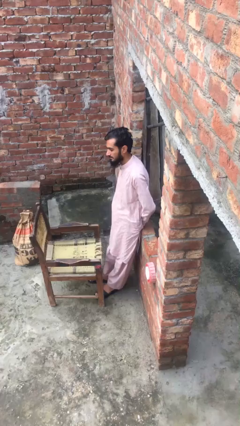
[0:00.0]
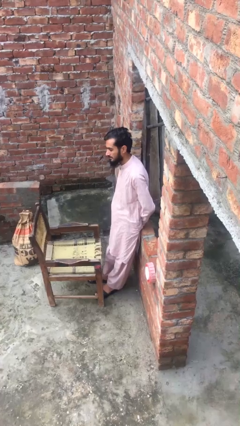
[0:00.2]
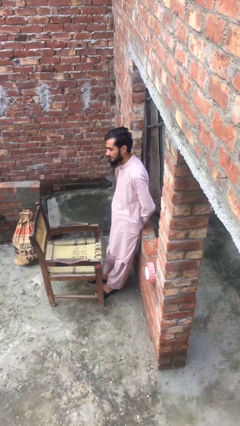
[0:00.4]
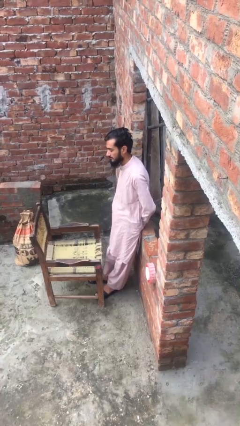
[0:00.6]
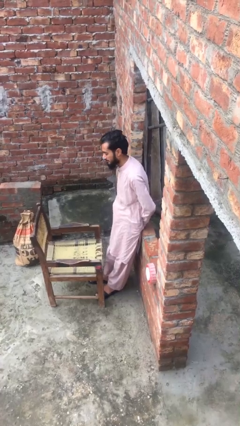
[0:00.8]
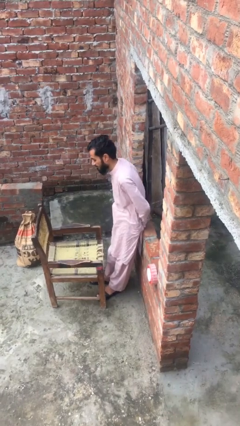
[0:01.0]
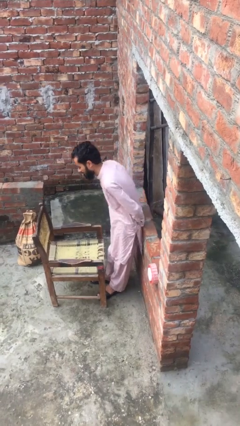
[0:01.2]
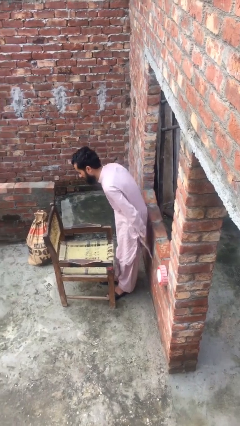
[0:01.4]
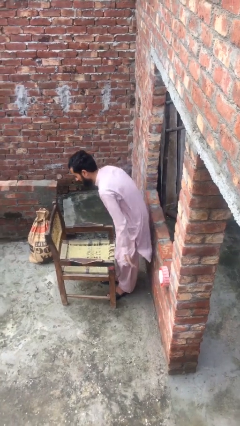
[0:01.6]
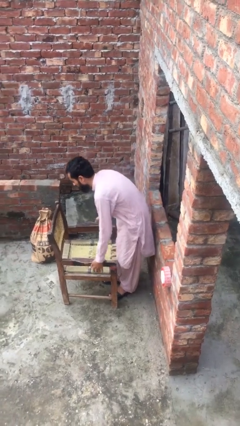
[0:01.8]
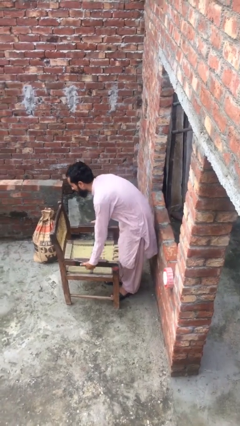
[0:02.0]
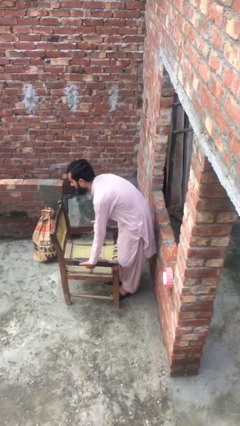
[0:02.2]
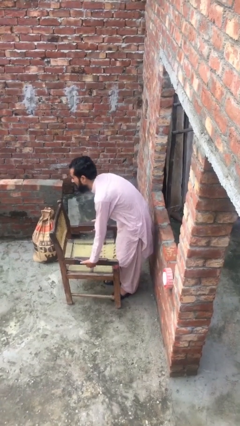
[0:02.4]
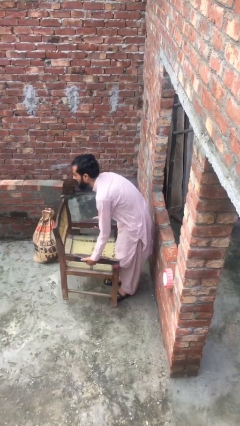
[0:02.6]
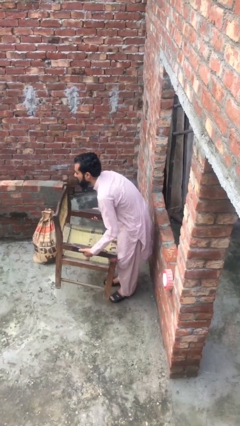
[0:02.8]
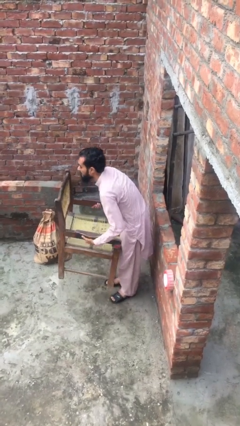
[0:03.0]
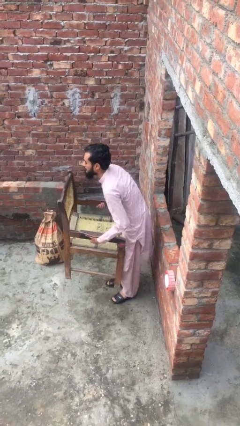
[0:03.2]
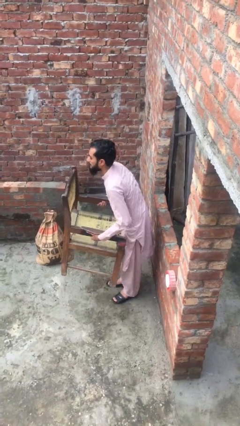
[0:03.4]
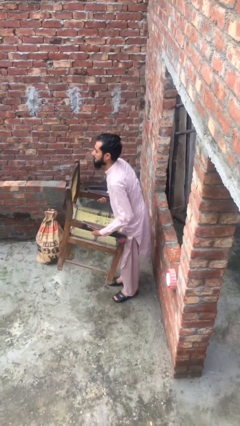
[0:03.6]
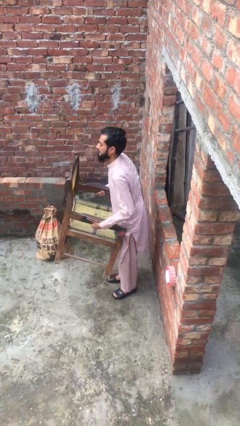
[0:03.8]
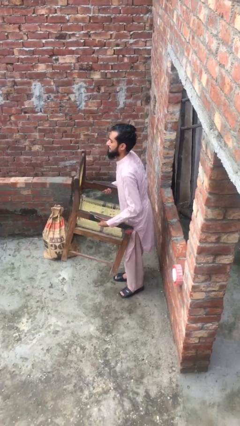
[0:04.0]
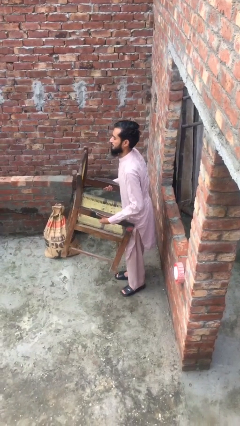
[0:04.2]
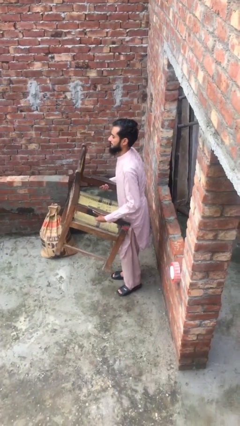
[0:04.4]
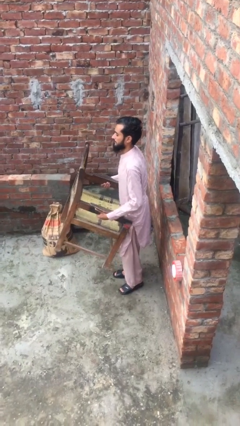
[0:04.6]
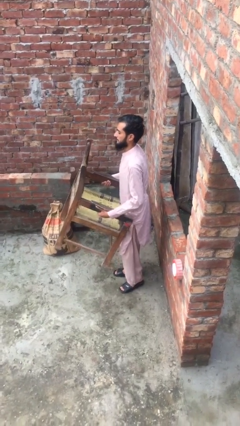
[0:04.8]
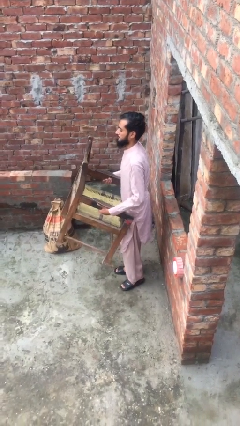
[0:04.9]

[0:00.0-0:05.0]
person picks up object from floor
